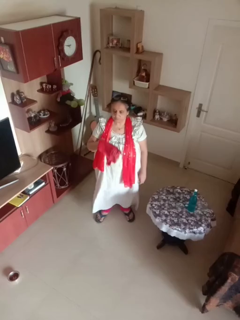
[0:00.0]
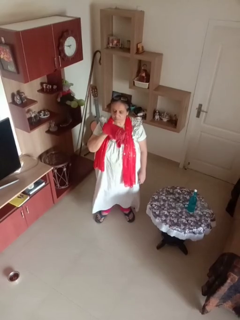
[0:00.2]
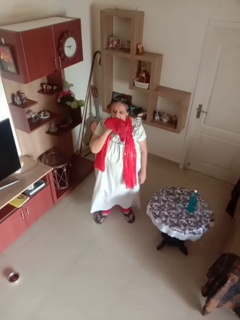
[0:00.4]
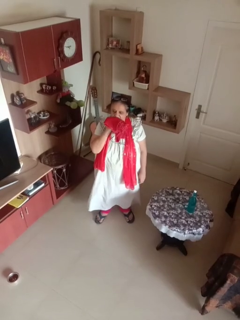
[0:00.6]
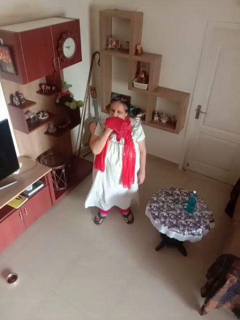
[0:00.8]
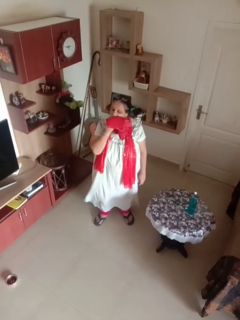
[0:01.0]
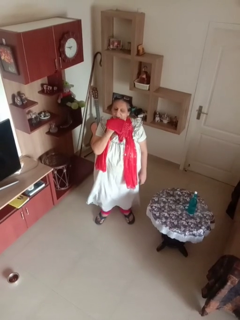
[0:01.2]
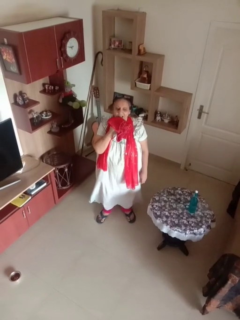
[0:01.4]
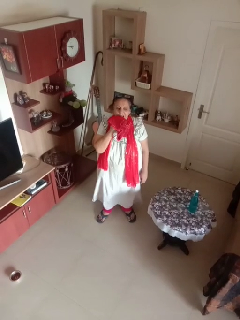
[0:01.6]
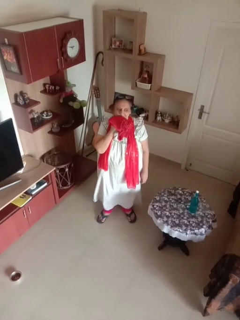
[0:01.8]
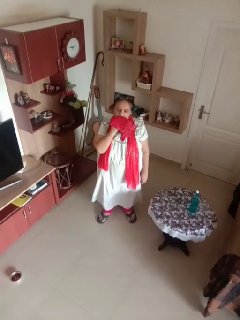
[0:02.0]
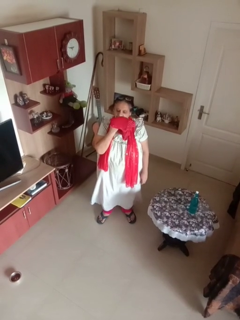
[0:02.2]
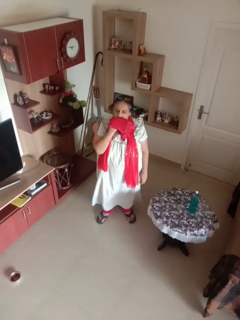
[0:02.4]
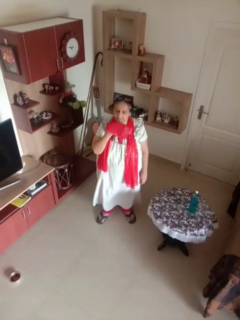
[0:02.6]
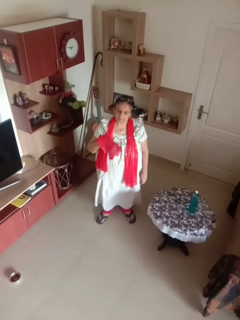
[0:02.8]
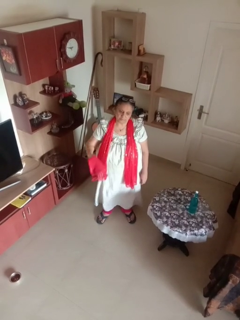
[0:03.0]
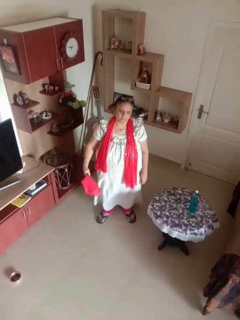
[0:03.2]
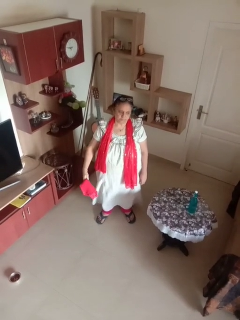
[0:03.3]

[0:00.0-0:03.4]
person wipes mouth with napkin

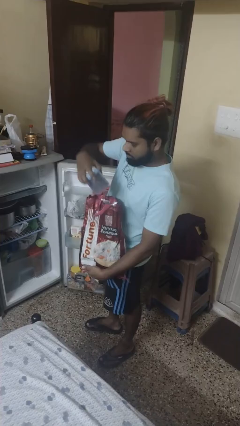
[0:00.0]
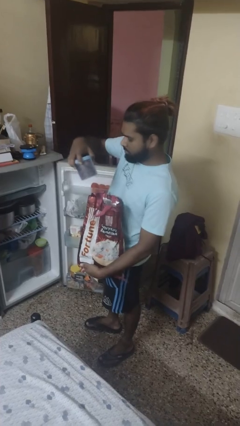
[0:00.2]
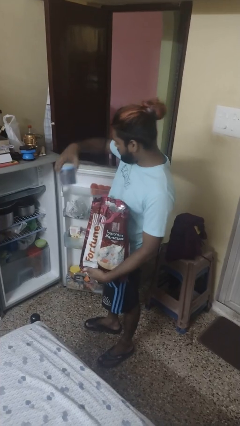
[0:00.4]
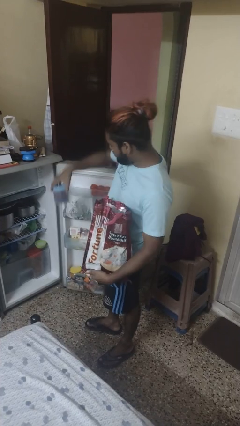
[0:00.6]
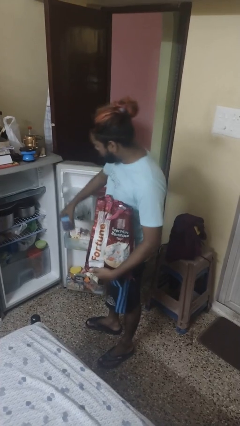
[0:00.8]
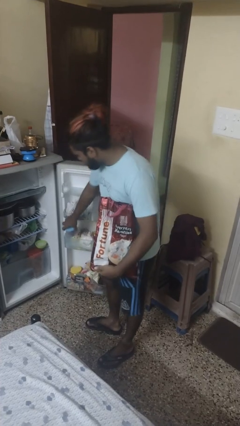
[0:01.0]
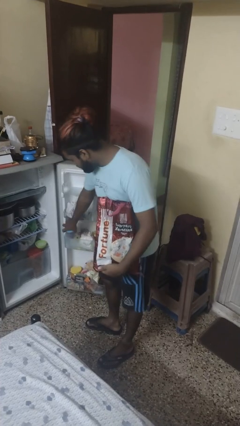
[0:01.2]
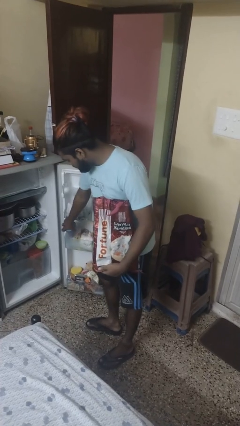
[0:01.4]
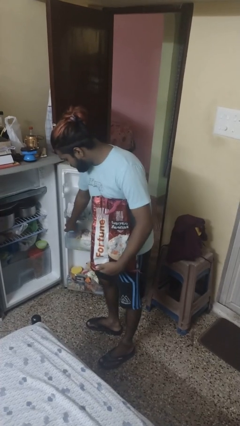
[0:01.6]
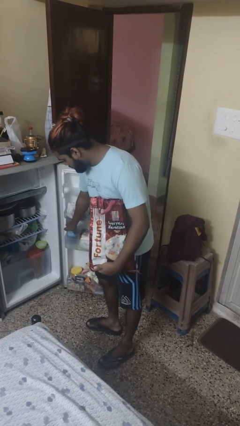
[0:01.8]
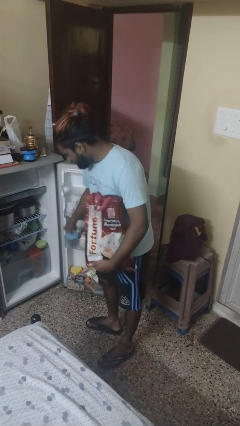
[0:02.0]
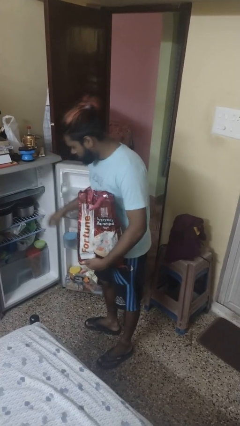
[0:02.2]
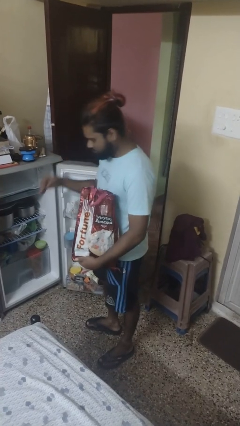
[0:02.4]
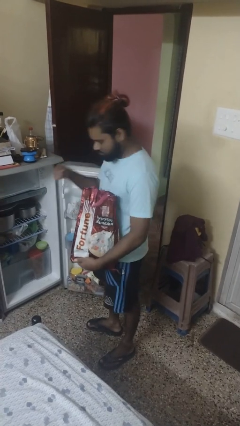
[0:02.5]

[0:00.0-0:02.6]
person loads groceries into refrigerator

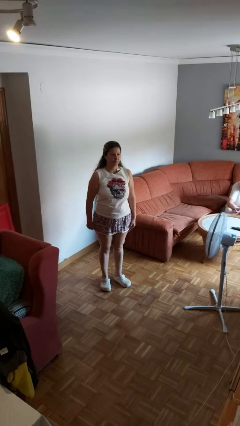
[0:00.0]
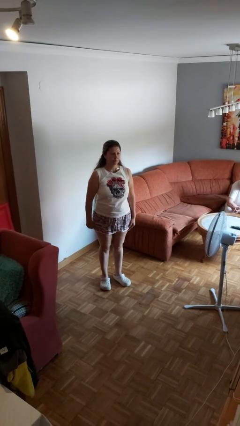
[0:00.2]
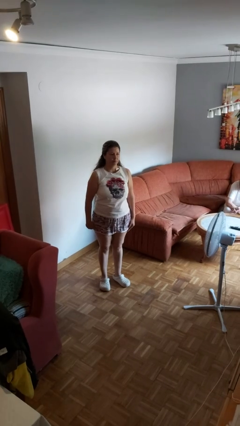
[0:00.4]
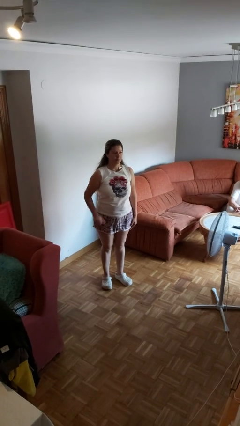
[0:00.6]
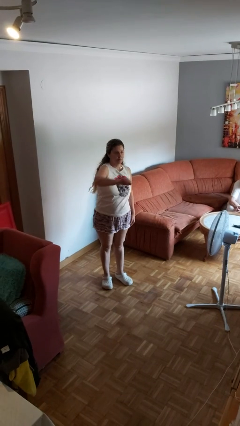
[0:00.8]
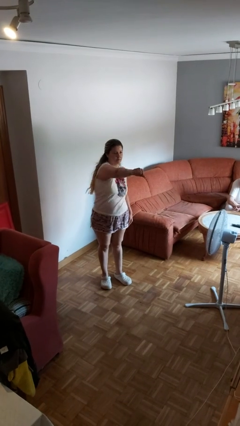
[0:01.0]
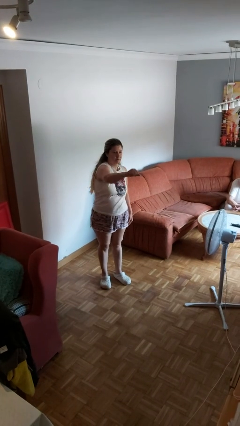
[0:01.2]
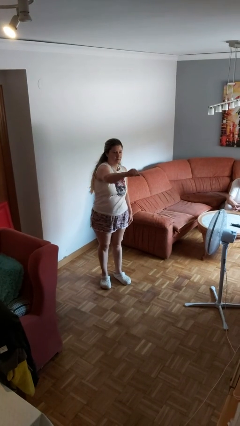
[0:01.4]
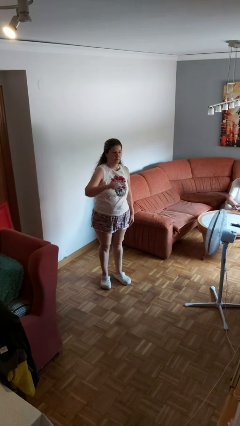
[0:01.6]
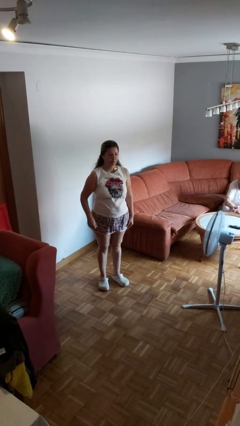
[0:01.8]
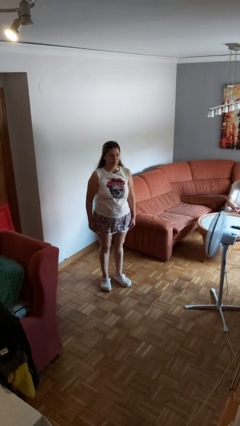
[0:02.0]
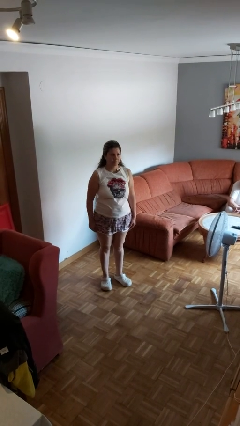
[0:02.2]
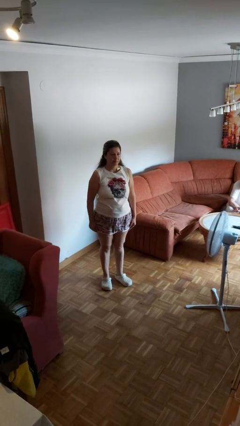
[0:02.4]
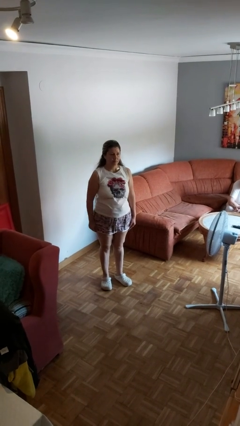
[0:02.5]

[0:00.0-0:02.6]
person karate chop

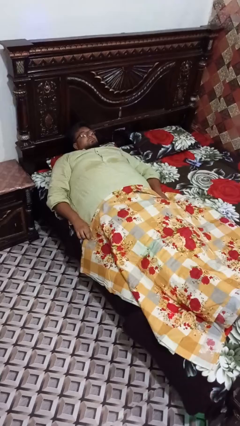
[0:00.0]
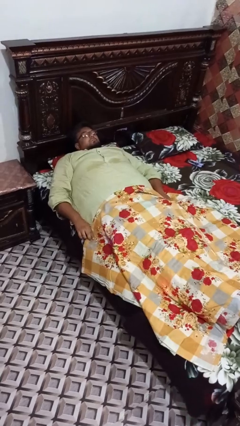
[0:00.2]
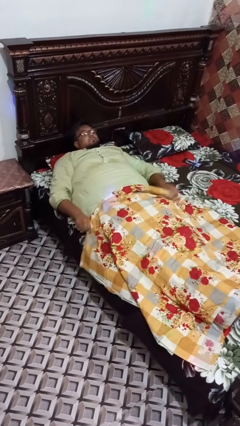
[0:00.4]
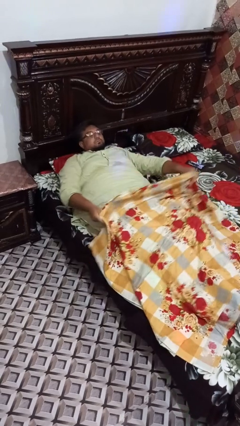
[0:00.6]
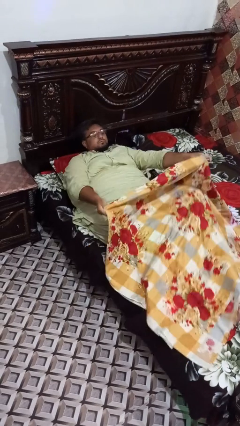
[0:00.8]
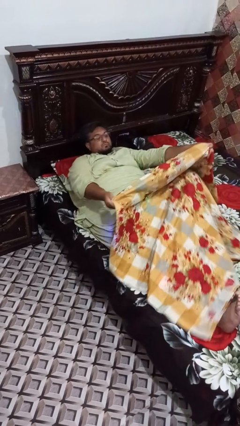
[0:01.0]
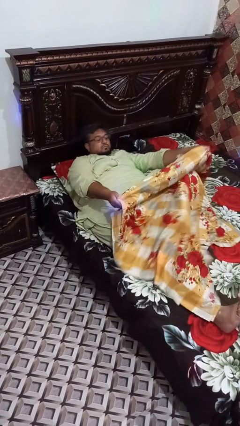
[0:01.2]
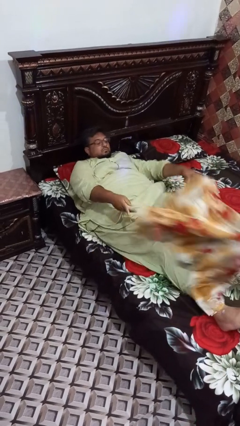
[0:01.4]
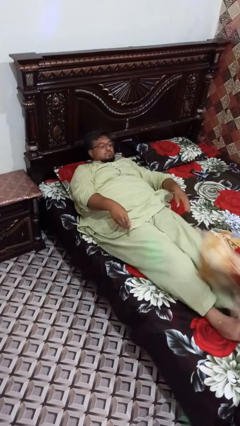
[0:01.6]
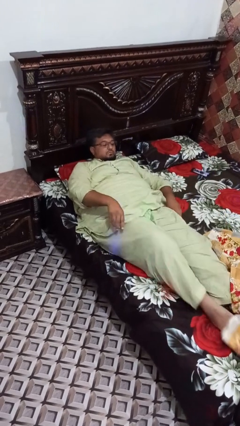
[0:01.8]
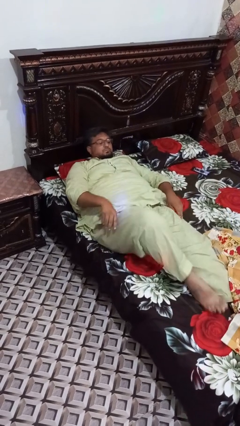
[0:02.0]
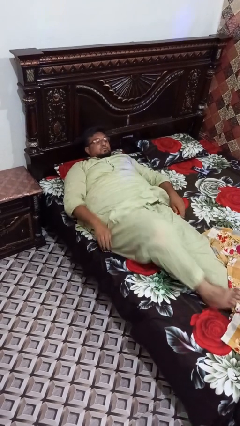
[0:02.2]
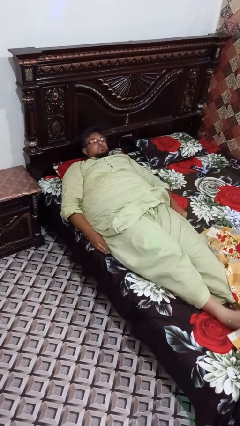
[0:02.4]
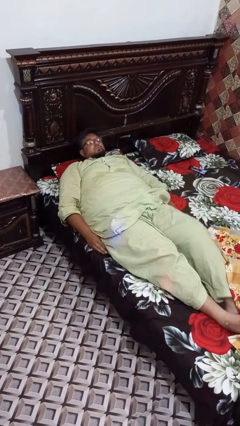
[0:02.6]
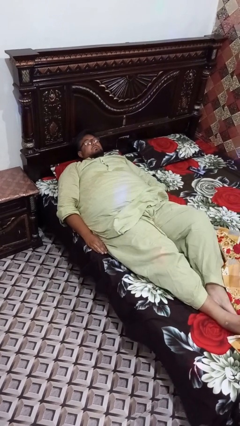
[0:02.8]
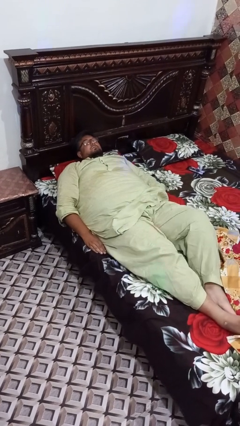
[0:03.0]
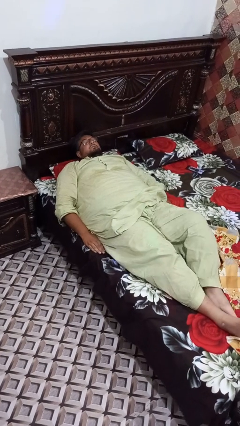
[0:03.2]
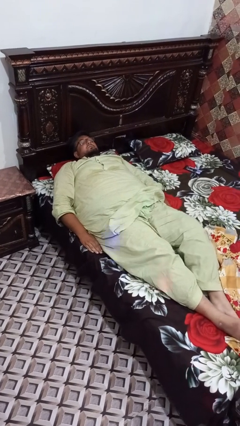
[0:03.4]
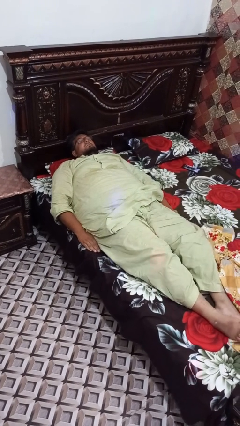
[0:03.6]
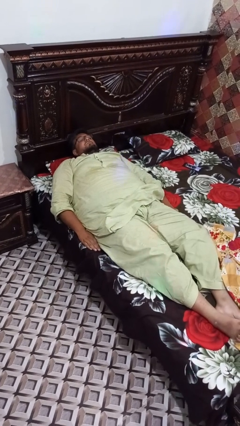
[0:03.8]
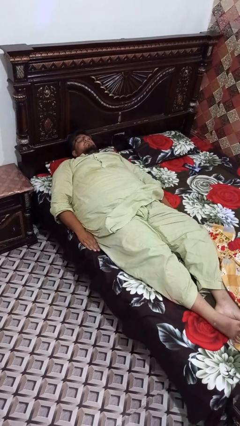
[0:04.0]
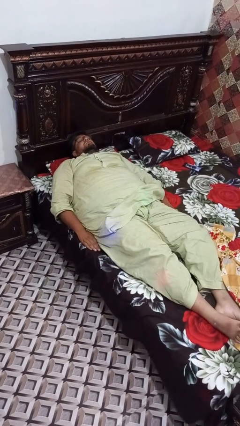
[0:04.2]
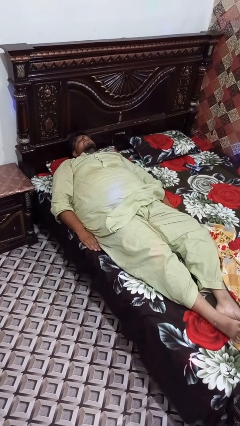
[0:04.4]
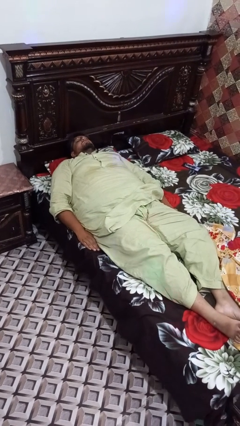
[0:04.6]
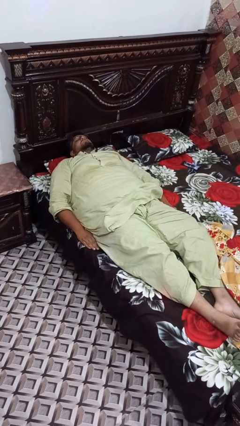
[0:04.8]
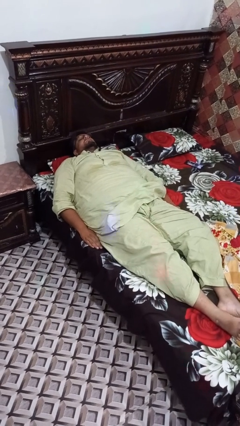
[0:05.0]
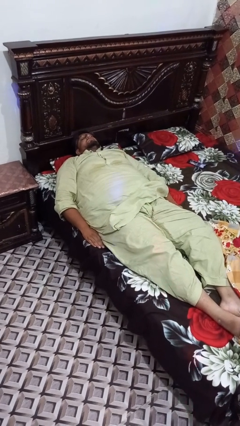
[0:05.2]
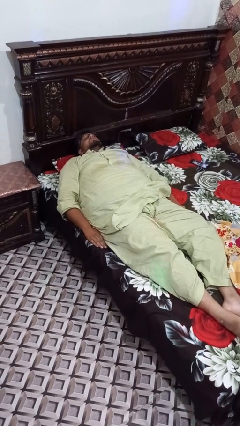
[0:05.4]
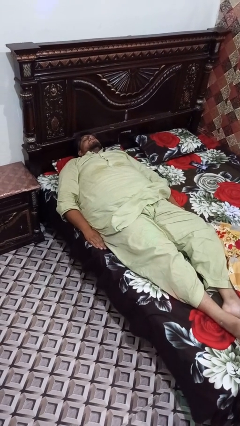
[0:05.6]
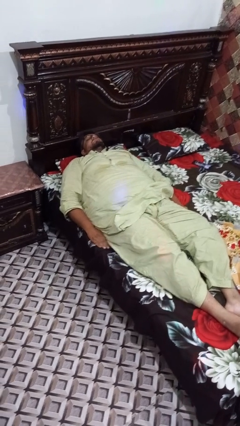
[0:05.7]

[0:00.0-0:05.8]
person uncovers with bedsheets

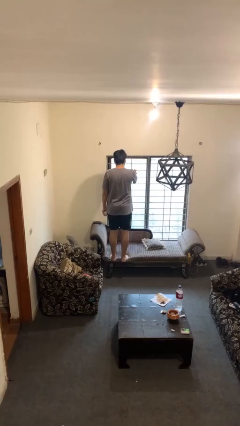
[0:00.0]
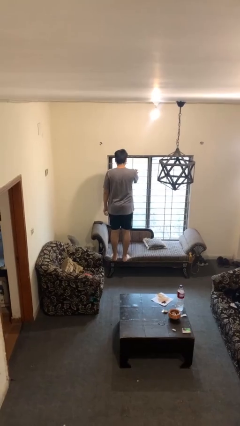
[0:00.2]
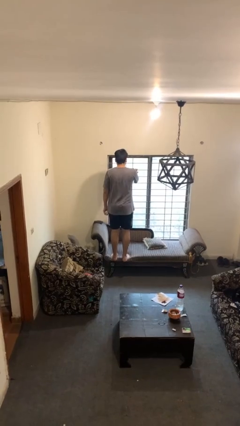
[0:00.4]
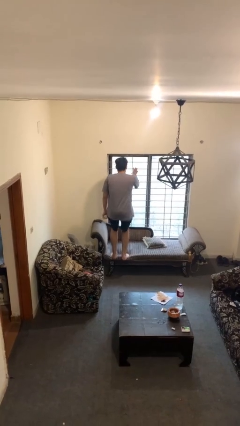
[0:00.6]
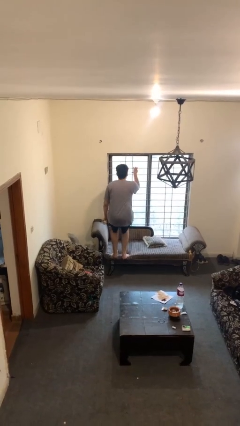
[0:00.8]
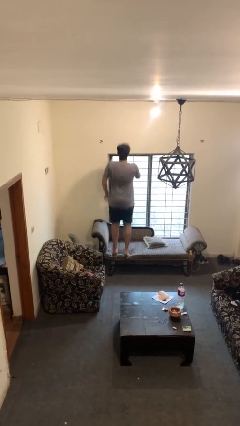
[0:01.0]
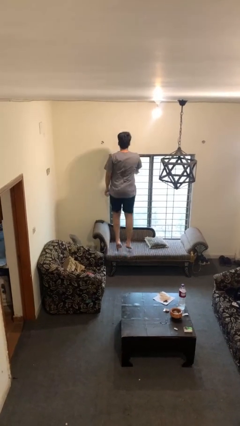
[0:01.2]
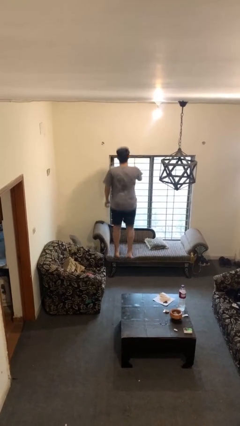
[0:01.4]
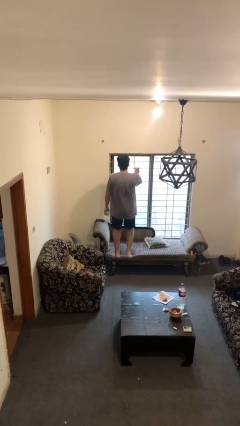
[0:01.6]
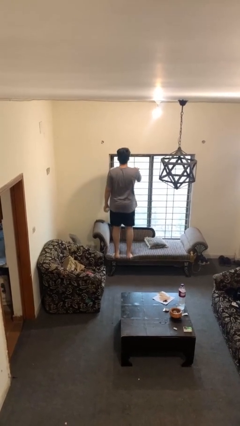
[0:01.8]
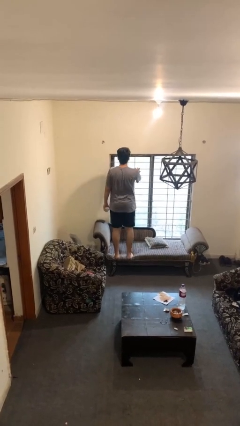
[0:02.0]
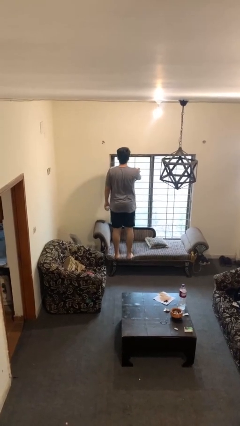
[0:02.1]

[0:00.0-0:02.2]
person jumps on couch

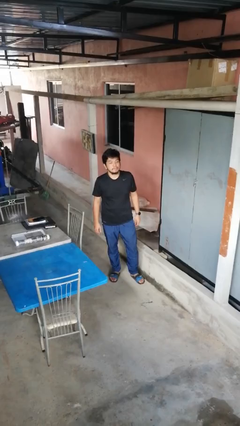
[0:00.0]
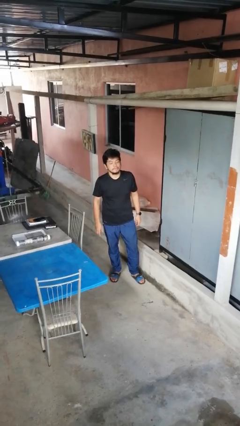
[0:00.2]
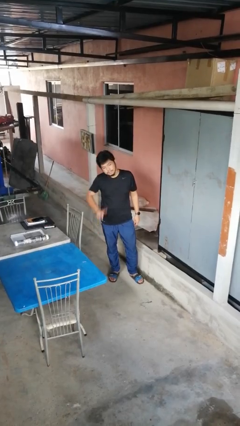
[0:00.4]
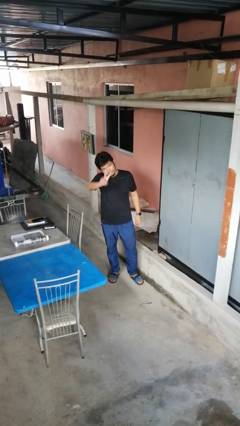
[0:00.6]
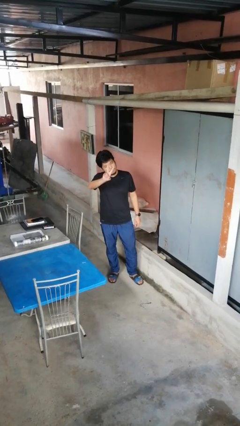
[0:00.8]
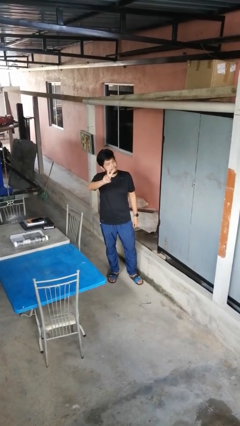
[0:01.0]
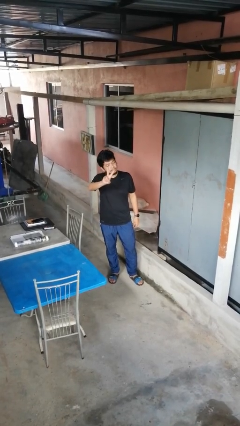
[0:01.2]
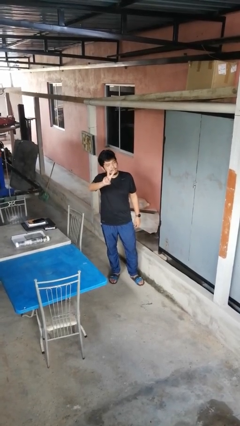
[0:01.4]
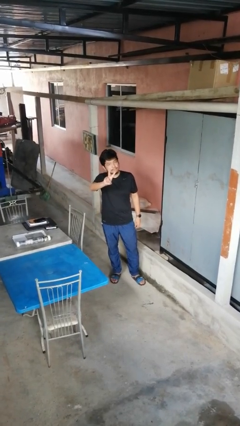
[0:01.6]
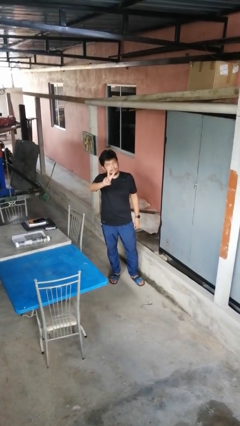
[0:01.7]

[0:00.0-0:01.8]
person gestures peace
